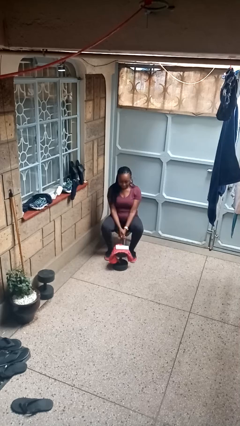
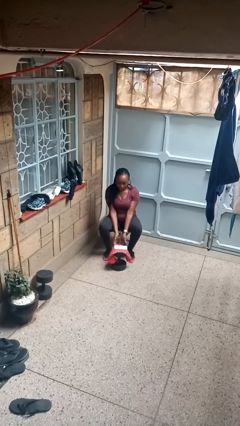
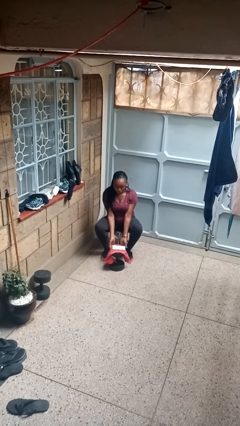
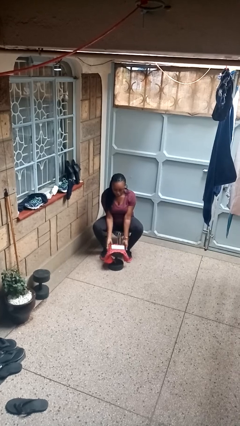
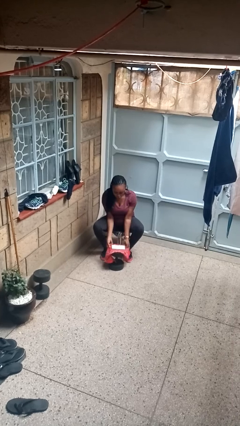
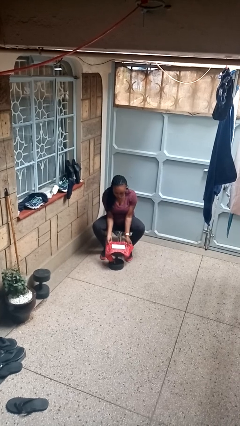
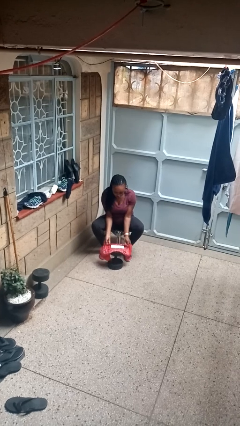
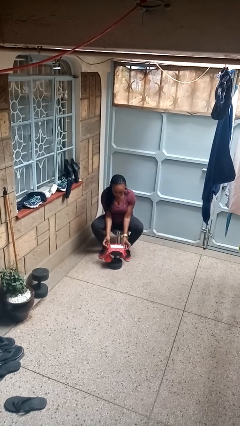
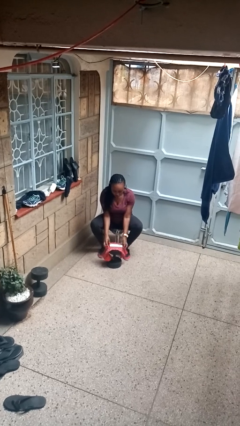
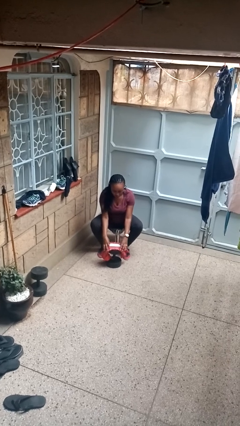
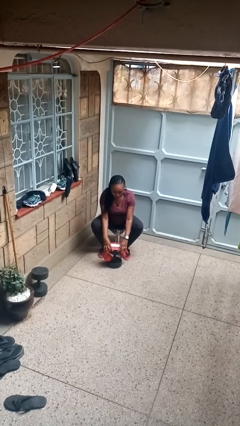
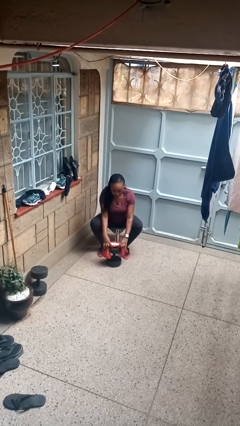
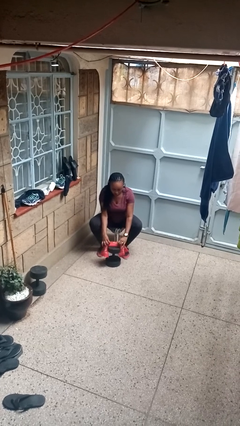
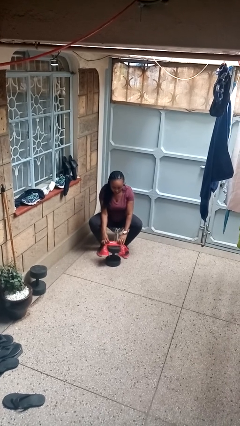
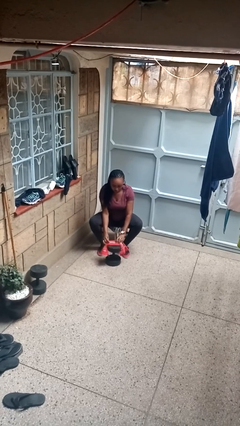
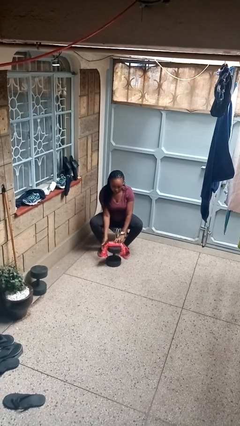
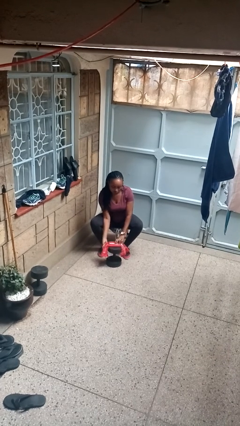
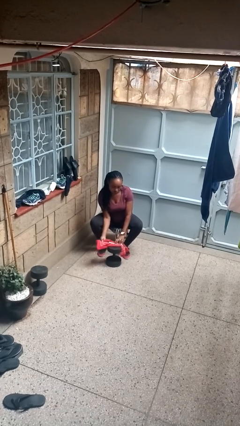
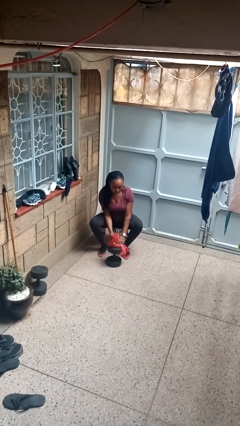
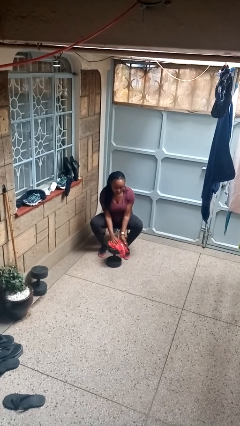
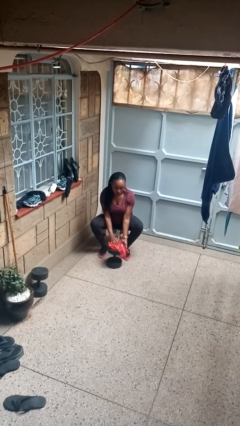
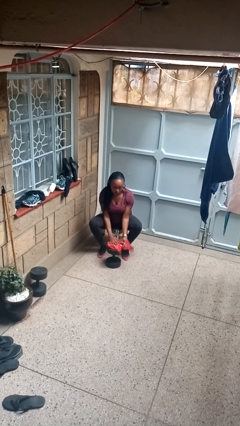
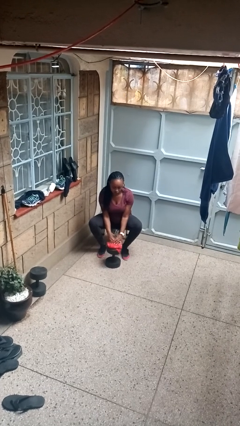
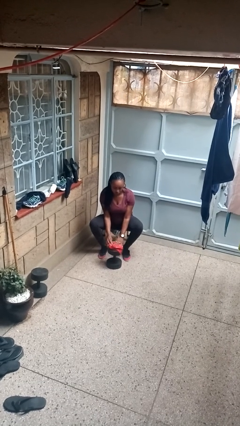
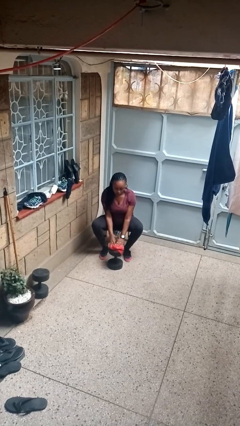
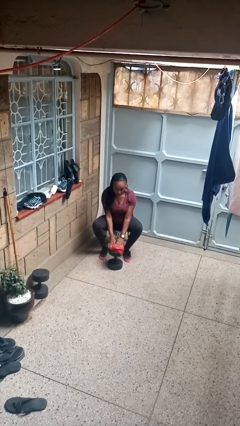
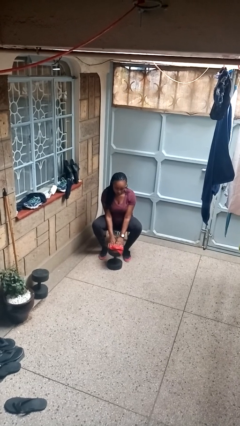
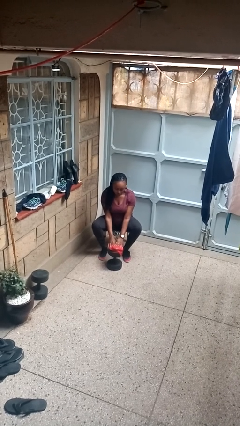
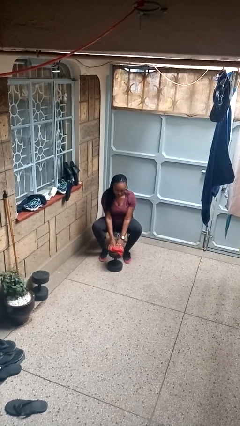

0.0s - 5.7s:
person wraps box

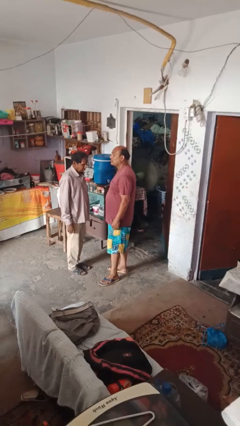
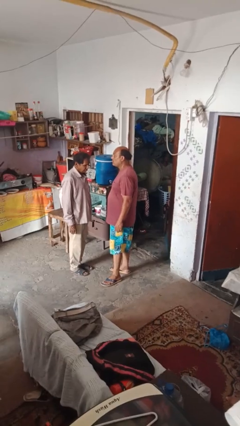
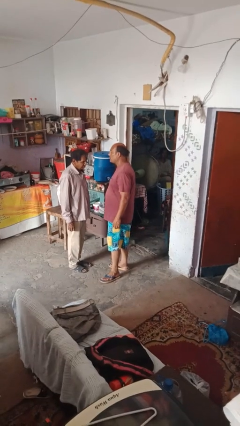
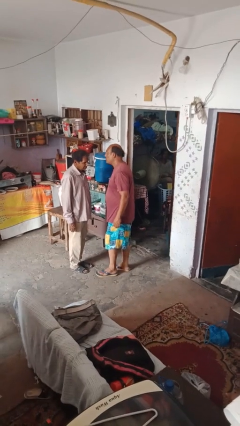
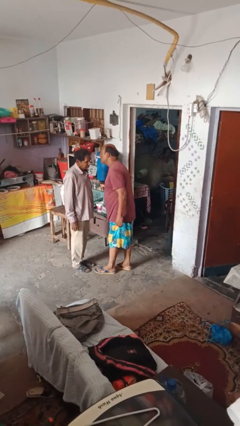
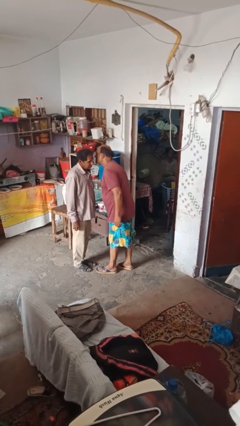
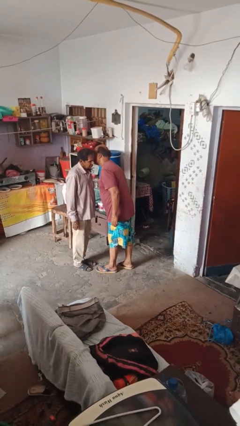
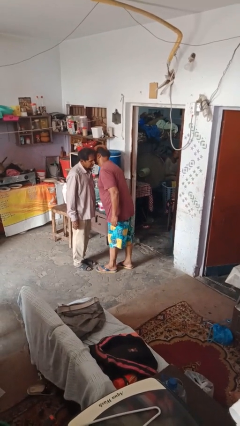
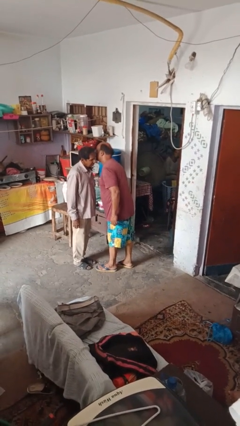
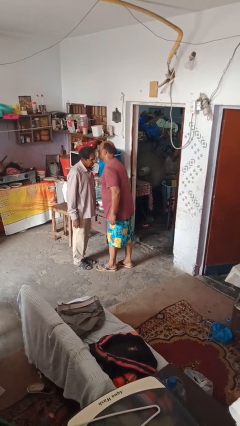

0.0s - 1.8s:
person kisses cheek of person

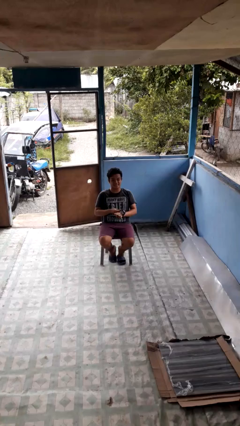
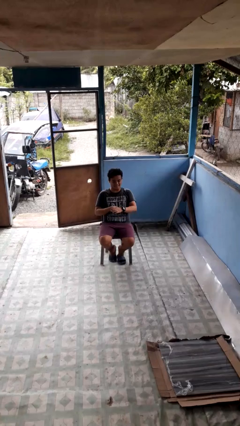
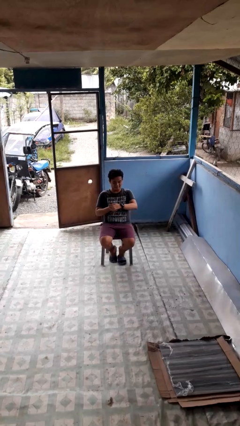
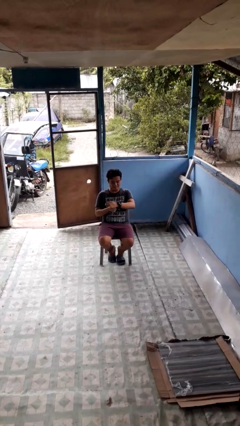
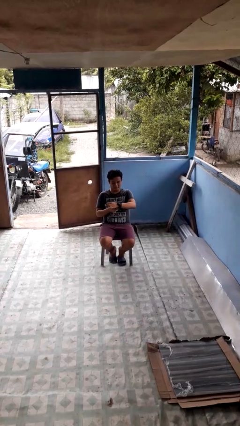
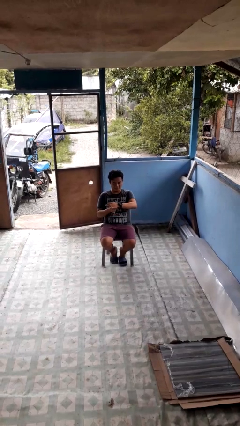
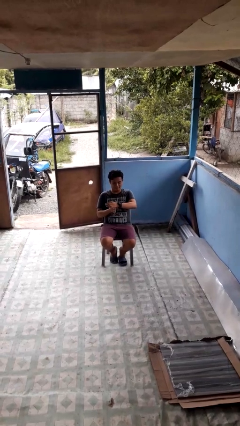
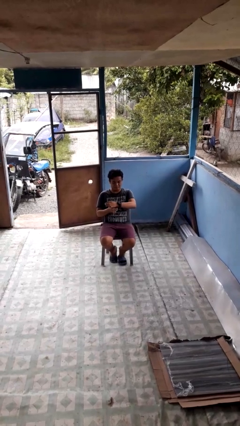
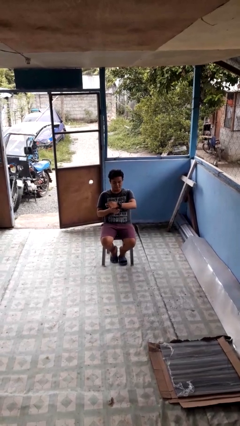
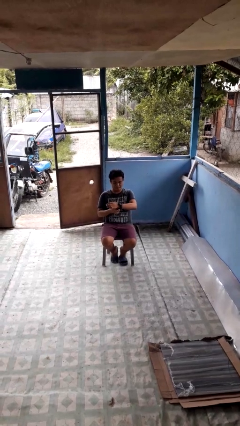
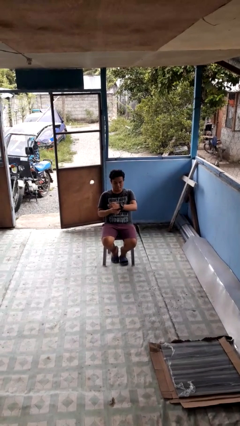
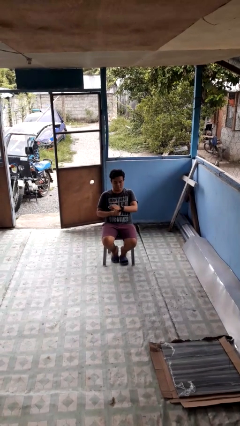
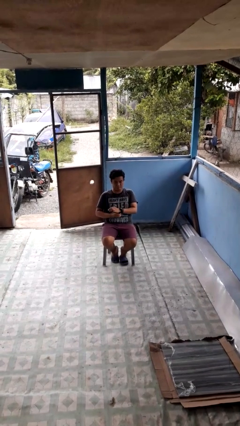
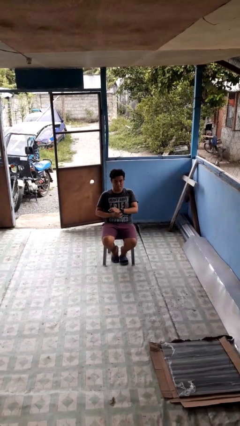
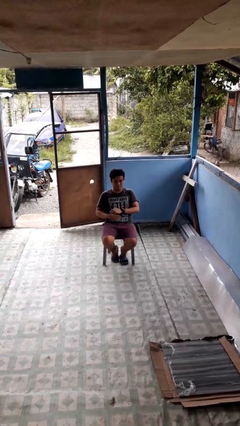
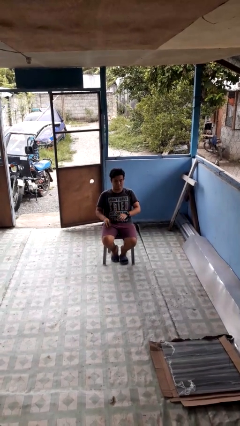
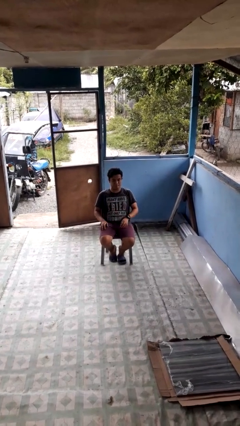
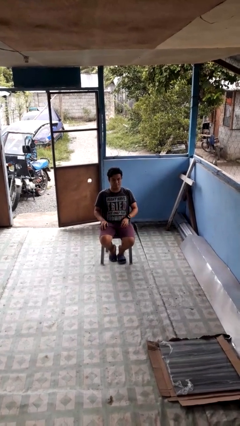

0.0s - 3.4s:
person puts on wristwatch

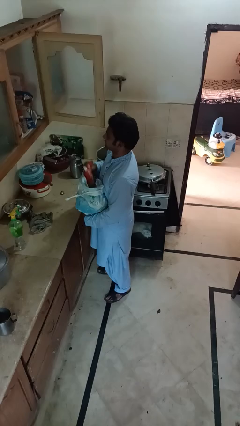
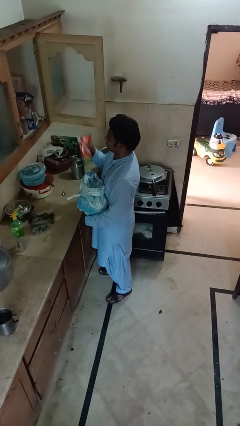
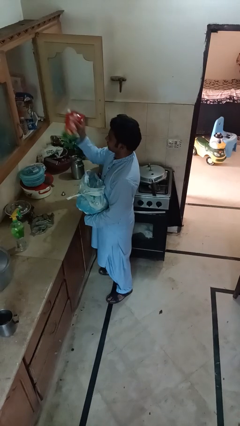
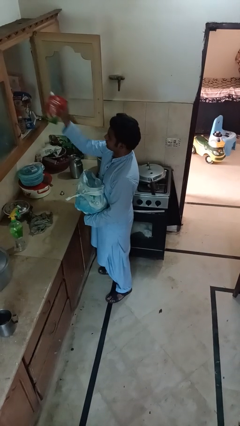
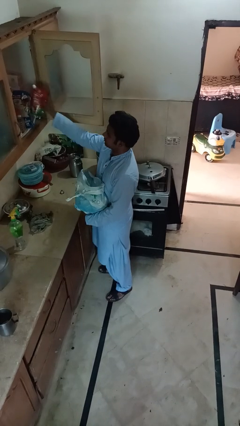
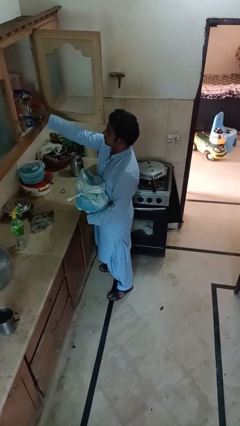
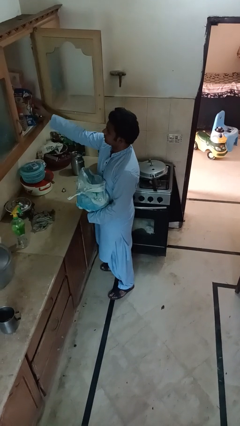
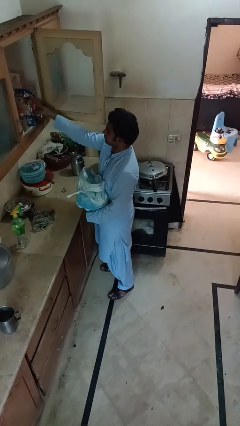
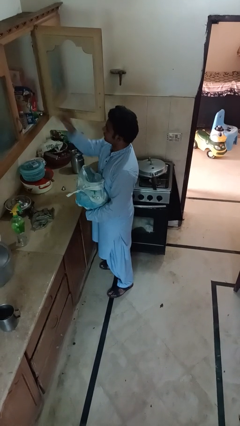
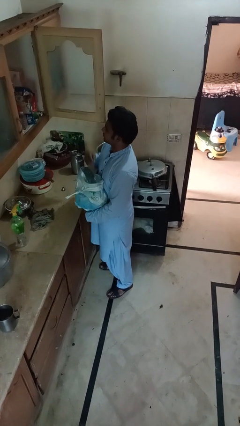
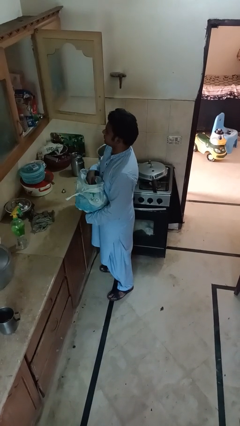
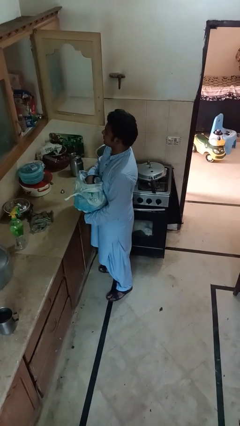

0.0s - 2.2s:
person loads groceries into cabinet

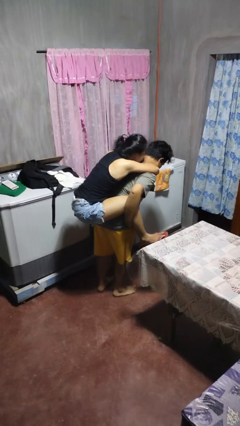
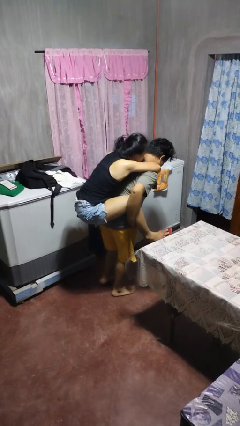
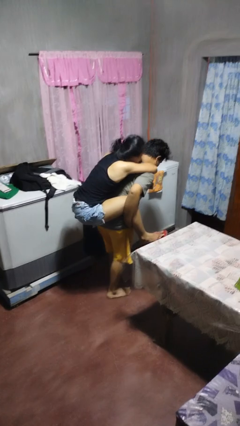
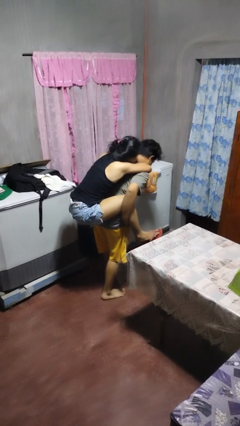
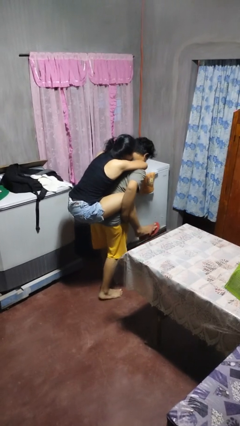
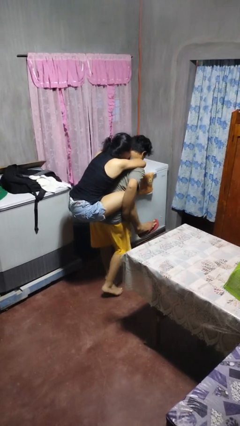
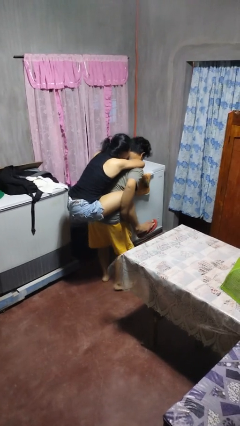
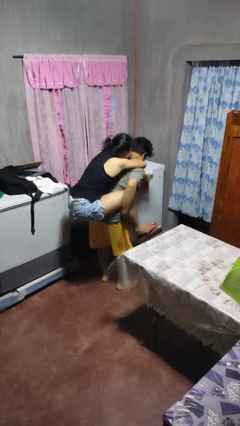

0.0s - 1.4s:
person carries person on back

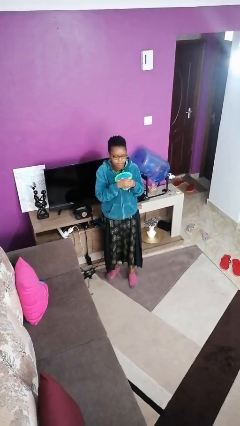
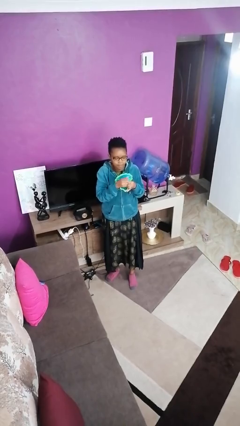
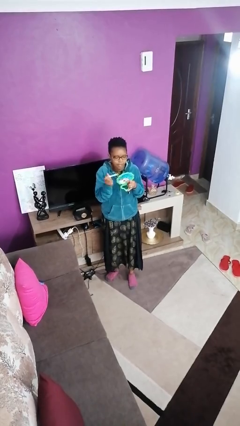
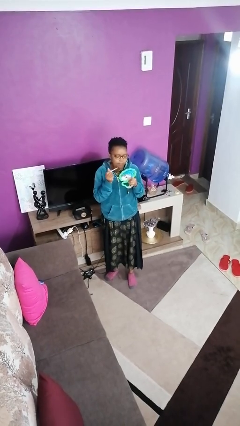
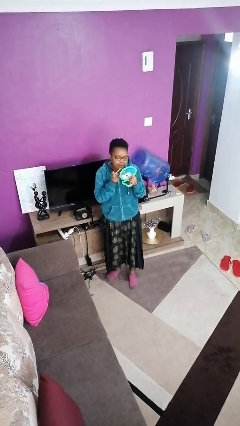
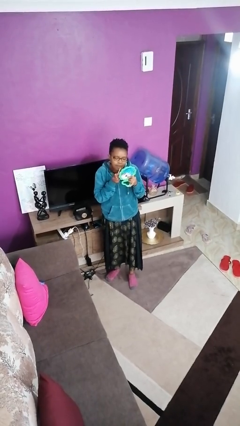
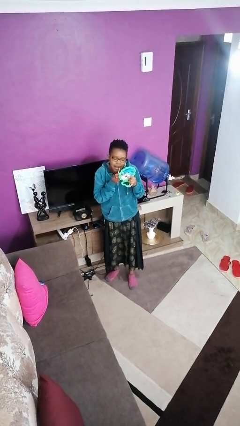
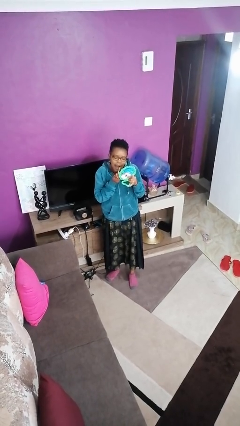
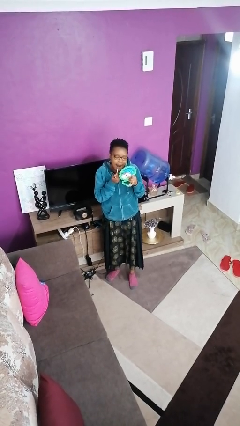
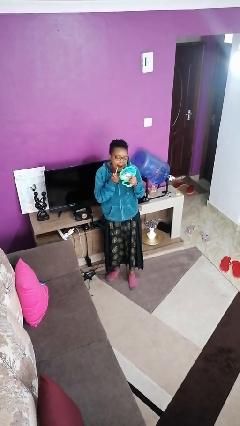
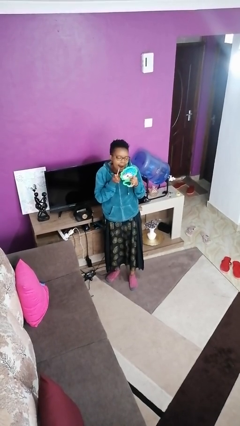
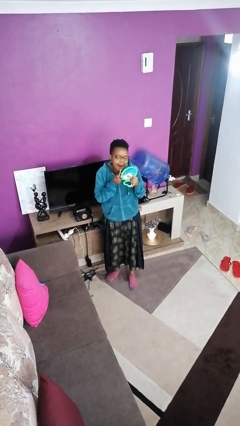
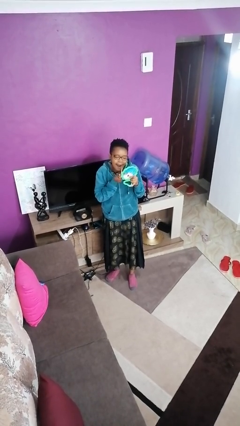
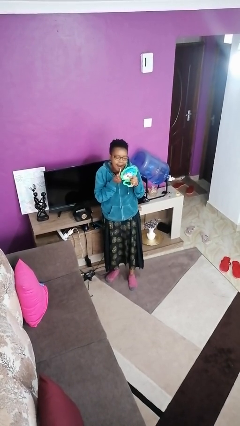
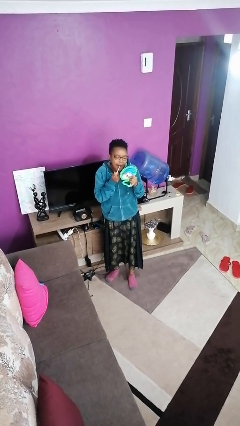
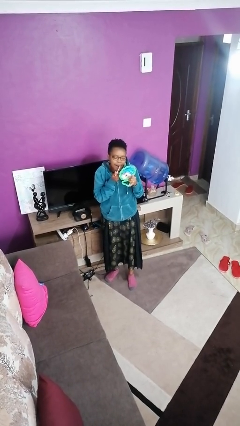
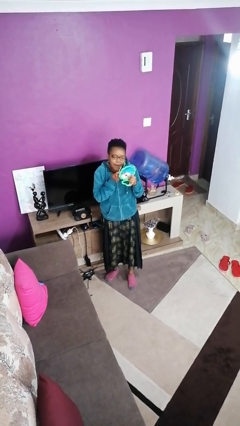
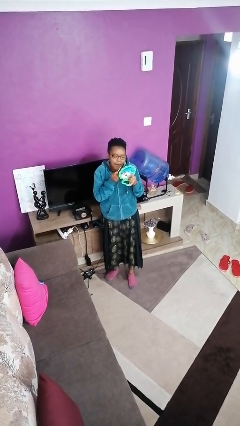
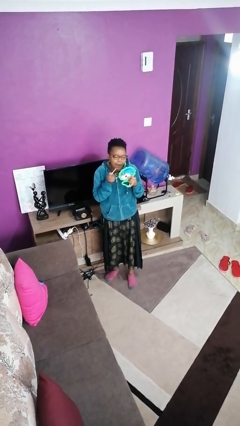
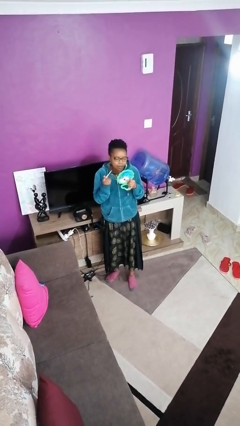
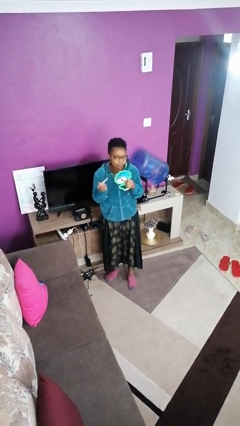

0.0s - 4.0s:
person applies lip makeup
